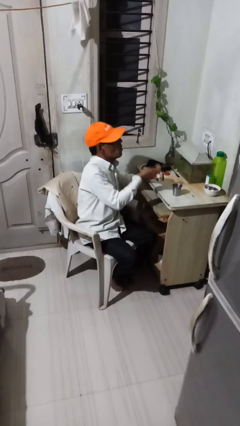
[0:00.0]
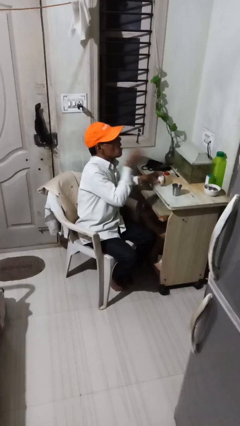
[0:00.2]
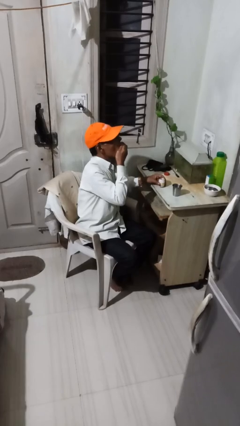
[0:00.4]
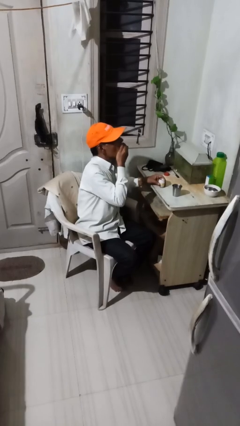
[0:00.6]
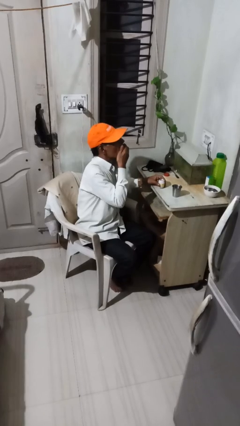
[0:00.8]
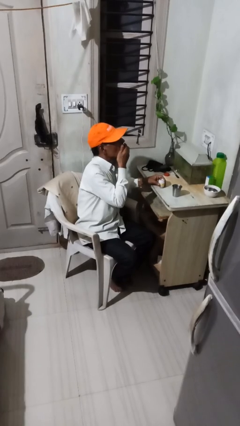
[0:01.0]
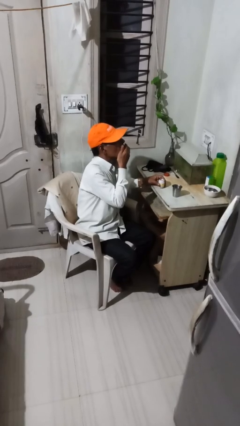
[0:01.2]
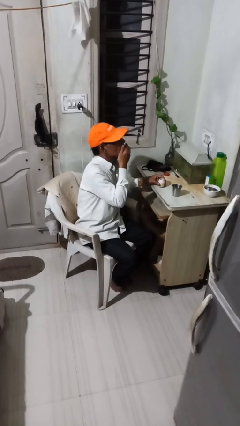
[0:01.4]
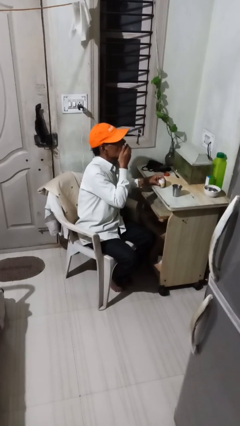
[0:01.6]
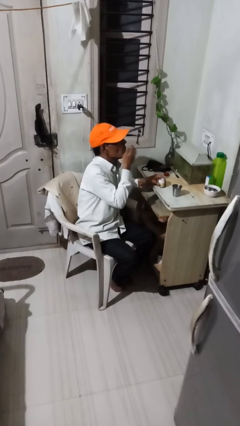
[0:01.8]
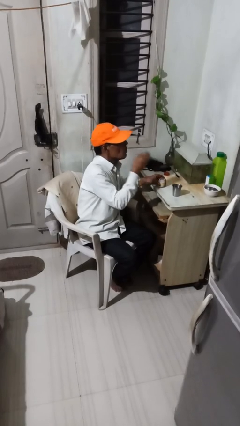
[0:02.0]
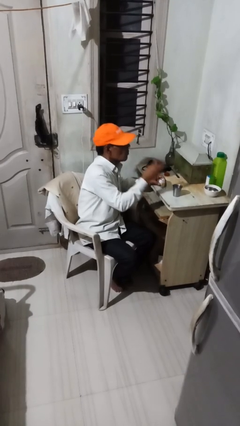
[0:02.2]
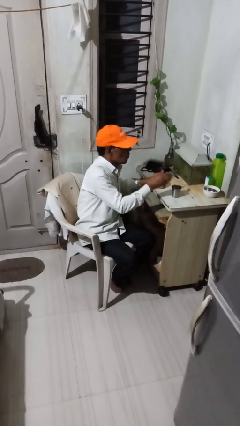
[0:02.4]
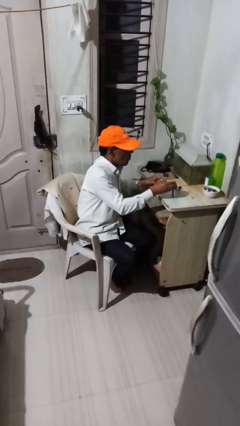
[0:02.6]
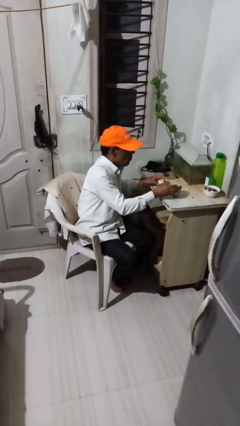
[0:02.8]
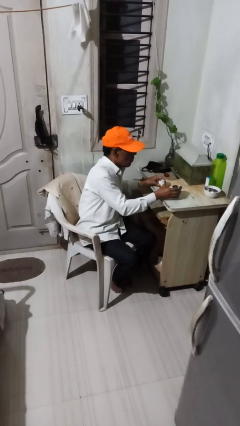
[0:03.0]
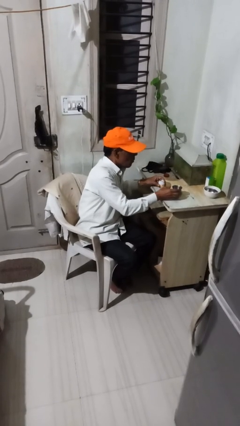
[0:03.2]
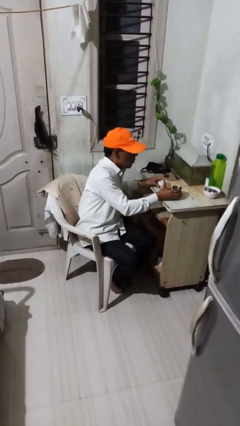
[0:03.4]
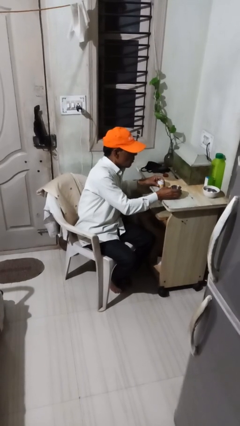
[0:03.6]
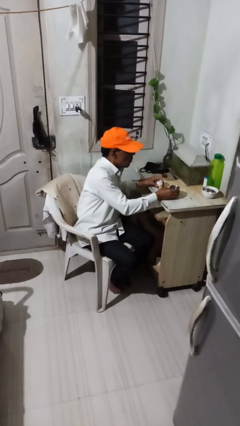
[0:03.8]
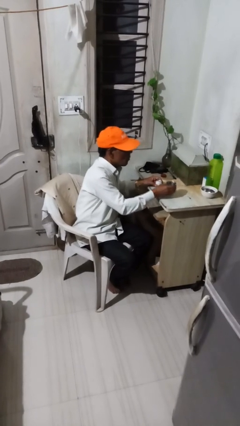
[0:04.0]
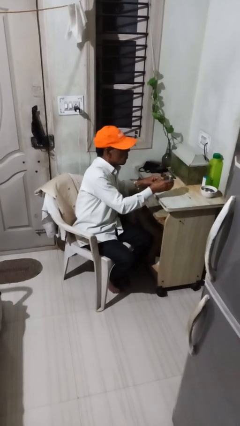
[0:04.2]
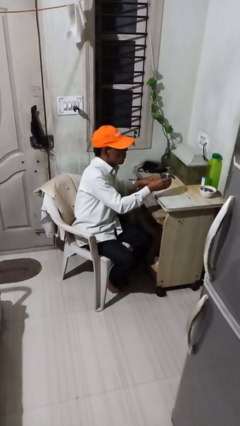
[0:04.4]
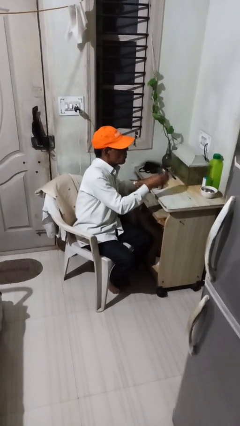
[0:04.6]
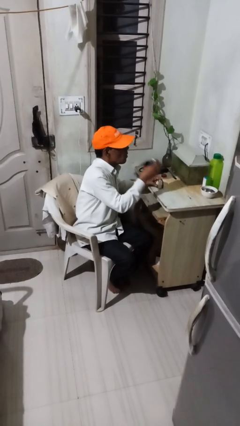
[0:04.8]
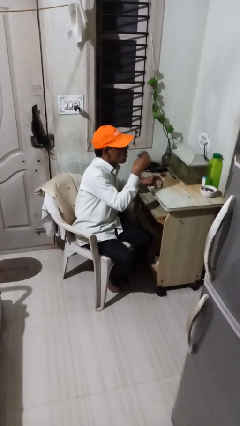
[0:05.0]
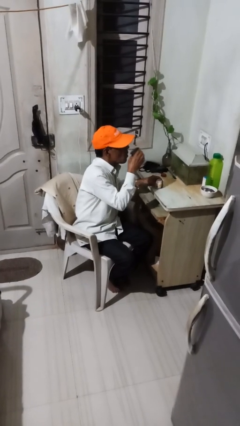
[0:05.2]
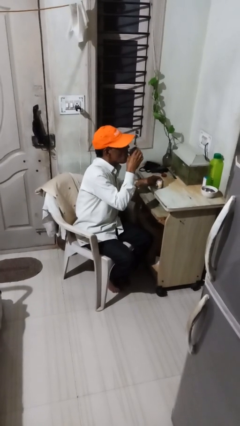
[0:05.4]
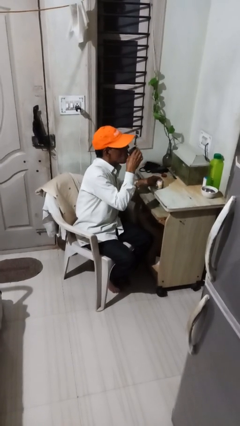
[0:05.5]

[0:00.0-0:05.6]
person folds socks

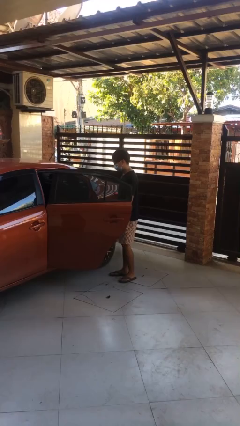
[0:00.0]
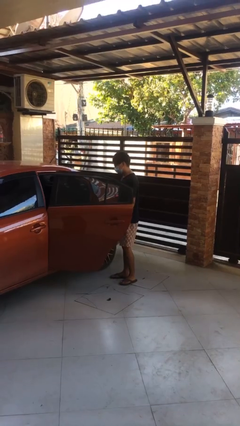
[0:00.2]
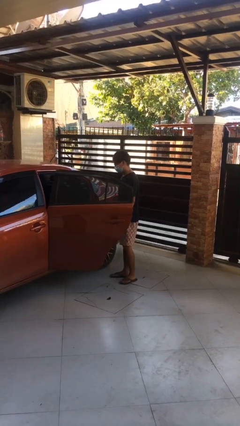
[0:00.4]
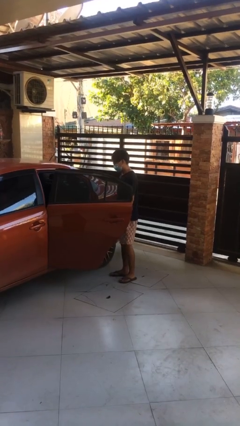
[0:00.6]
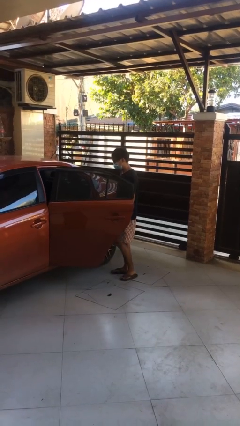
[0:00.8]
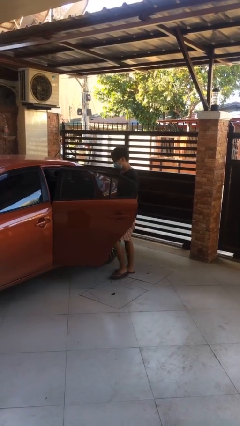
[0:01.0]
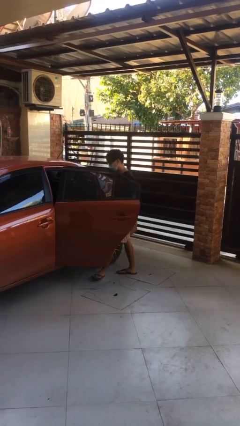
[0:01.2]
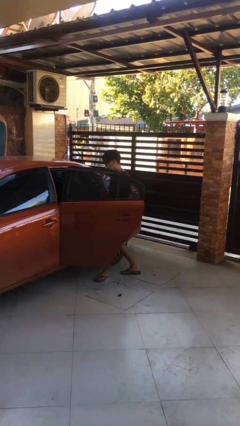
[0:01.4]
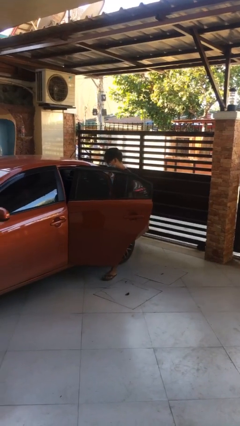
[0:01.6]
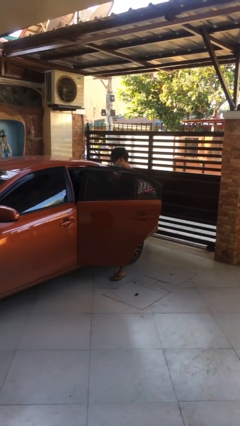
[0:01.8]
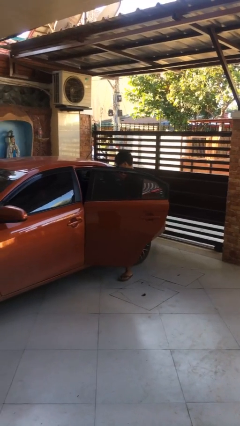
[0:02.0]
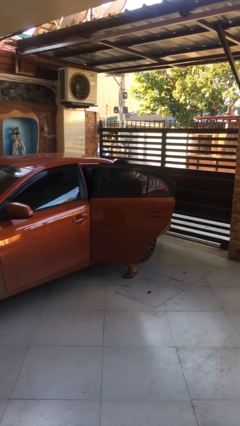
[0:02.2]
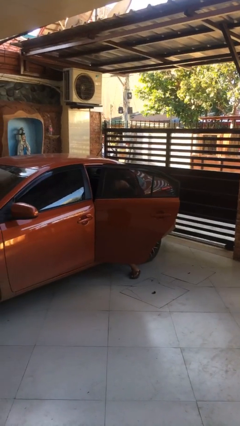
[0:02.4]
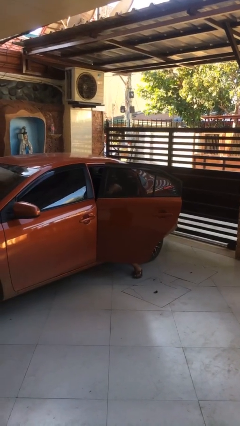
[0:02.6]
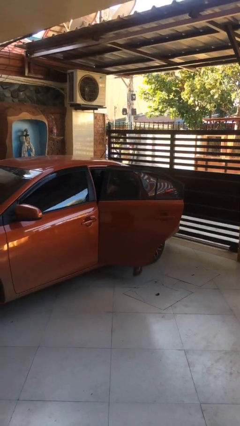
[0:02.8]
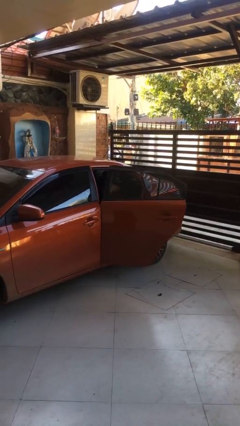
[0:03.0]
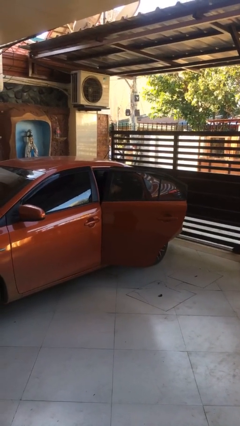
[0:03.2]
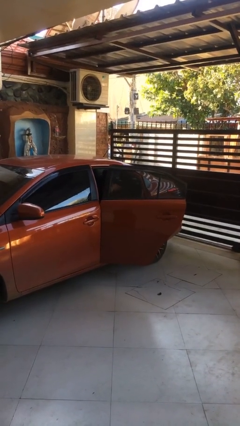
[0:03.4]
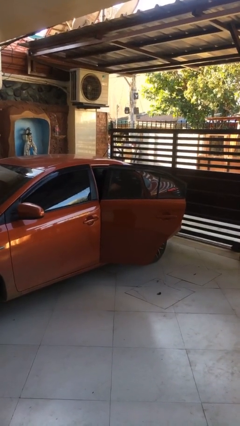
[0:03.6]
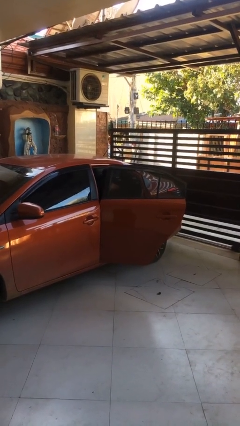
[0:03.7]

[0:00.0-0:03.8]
person enters car

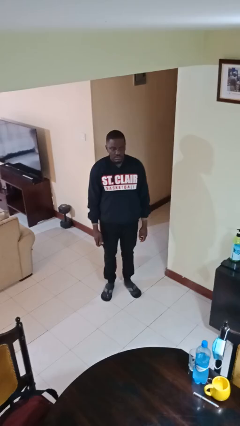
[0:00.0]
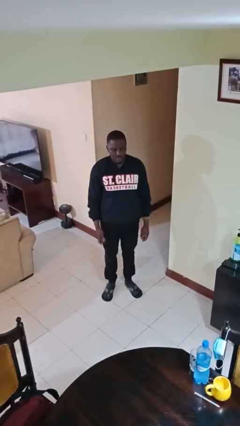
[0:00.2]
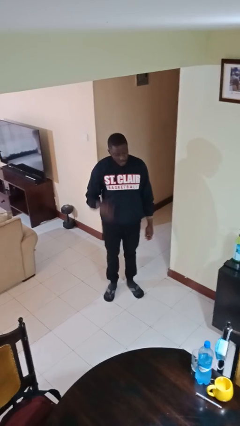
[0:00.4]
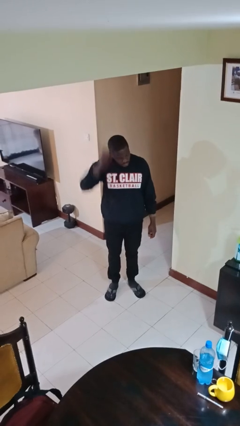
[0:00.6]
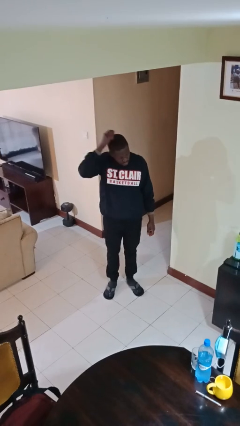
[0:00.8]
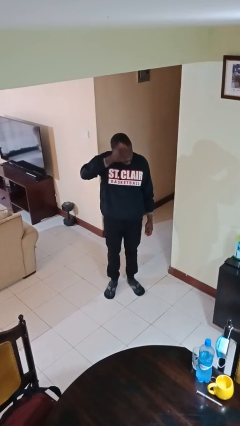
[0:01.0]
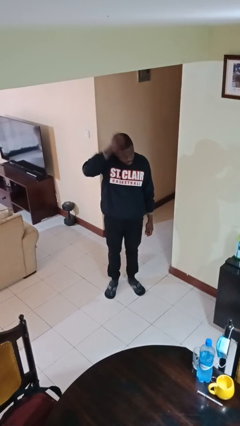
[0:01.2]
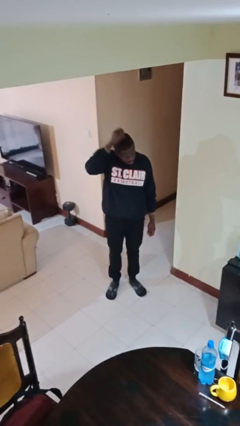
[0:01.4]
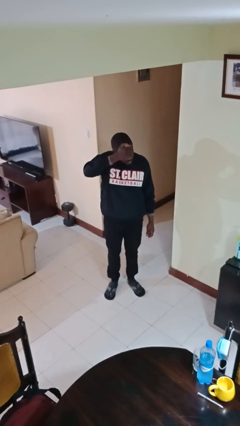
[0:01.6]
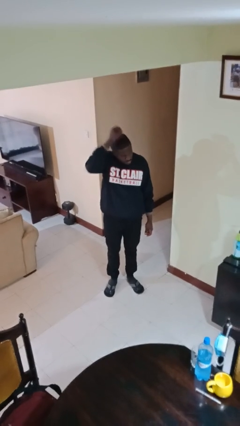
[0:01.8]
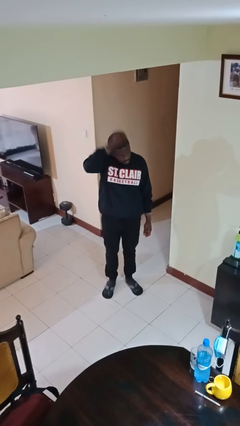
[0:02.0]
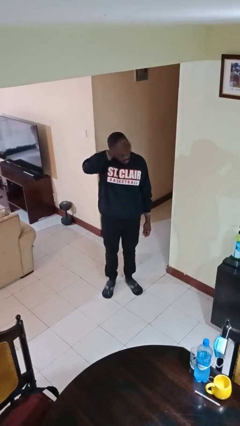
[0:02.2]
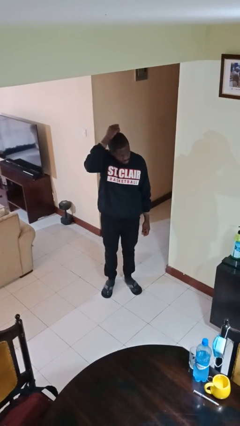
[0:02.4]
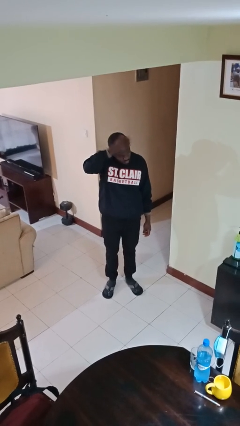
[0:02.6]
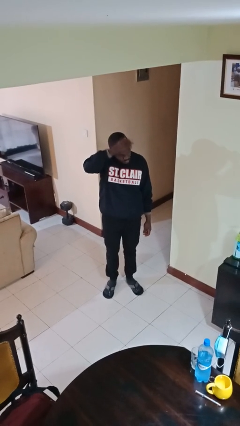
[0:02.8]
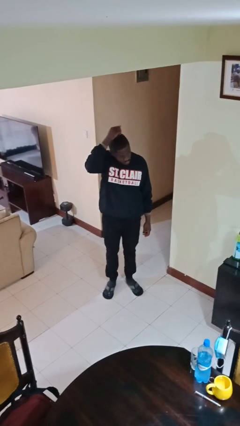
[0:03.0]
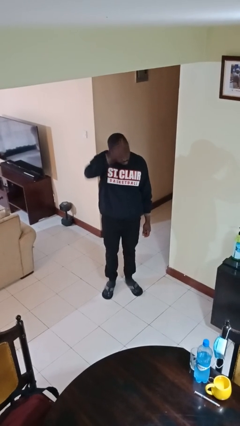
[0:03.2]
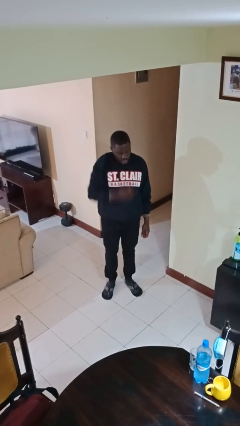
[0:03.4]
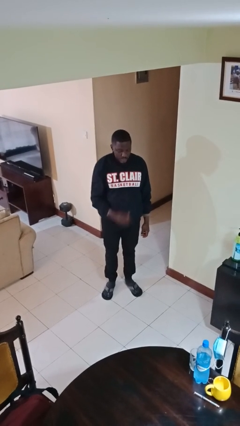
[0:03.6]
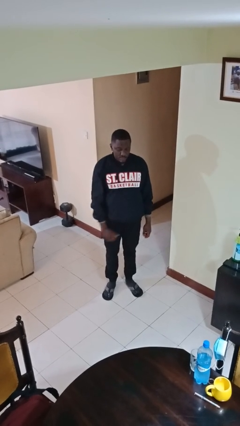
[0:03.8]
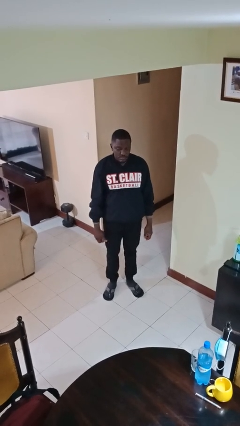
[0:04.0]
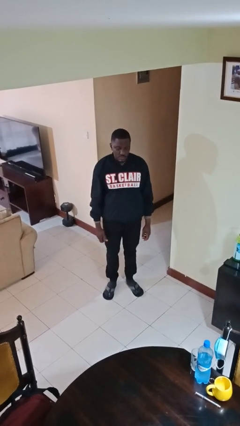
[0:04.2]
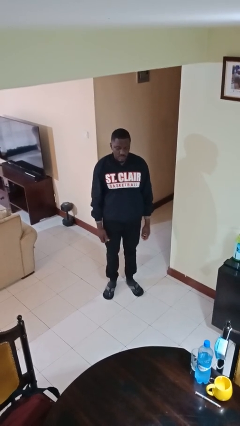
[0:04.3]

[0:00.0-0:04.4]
person brushes hair

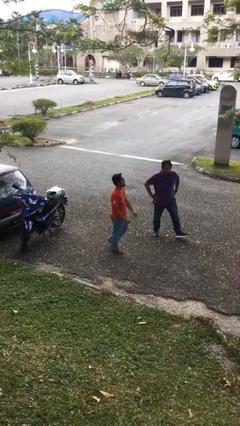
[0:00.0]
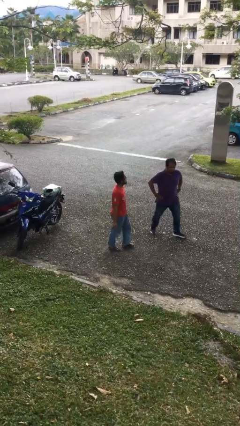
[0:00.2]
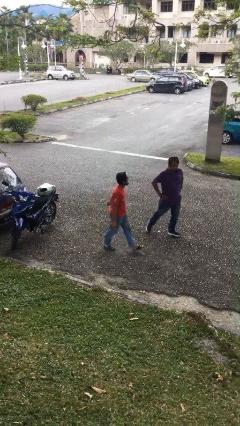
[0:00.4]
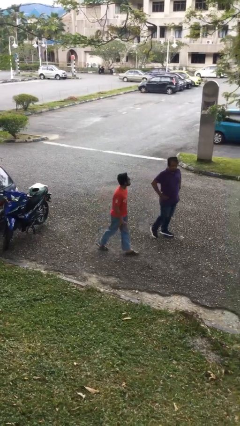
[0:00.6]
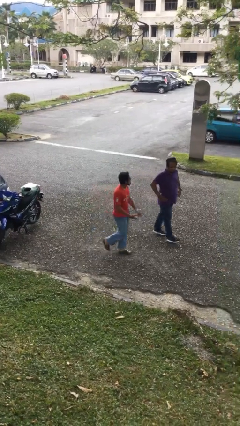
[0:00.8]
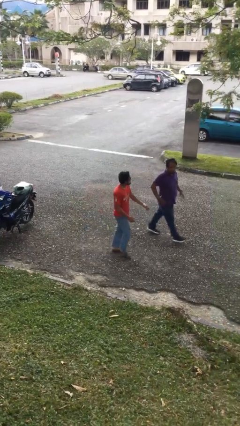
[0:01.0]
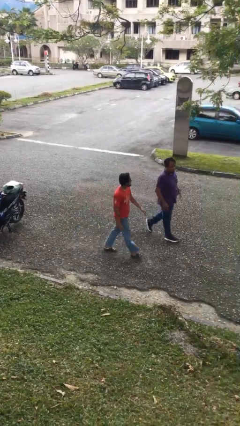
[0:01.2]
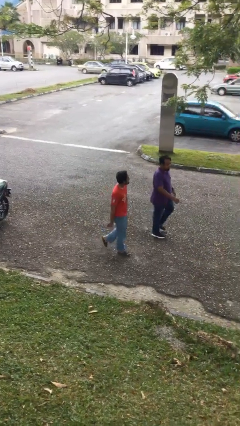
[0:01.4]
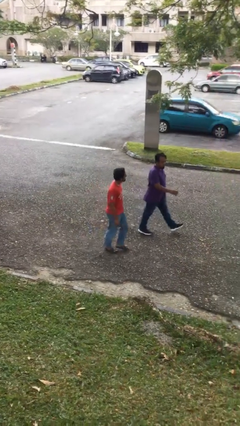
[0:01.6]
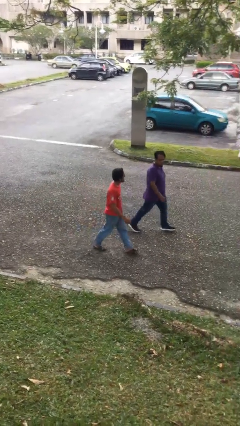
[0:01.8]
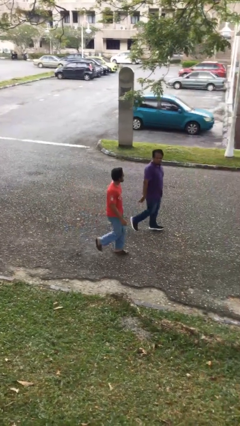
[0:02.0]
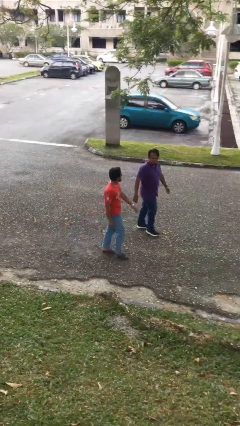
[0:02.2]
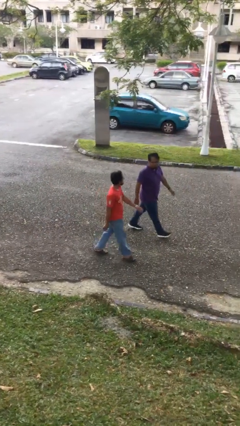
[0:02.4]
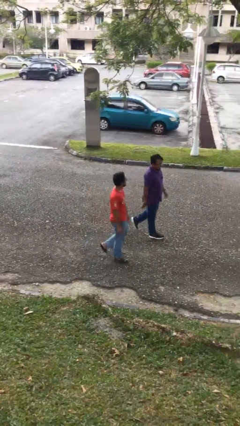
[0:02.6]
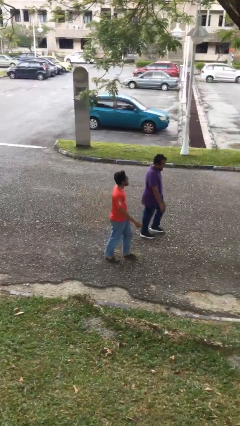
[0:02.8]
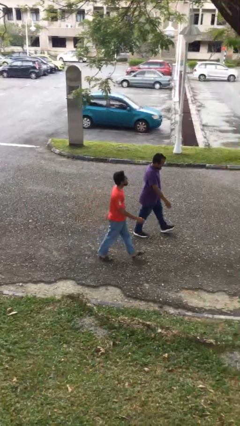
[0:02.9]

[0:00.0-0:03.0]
person talks to person

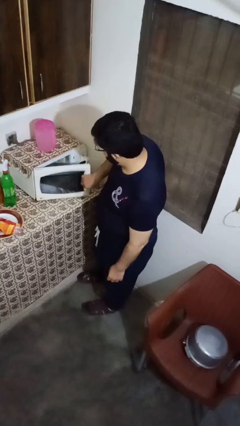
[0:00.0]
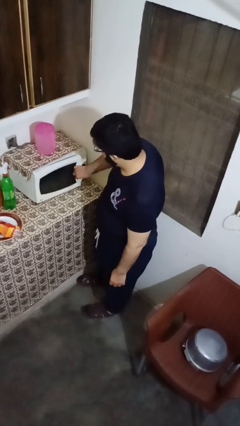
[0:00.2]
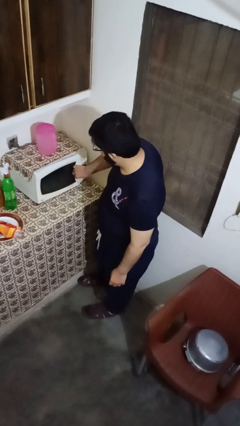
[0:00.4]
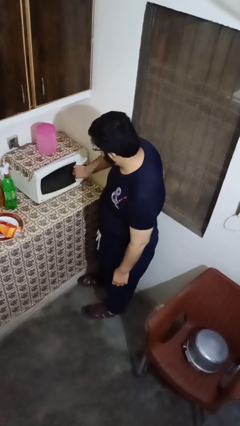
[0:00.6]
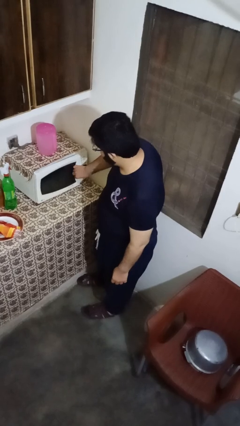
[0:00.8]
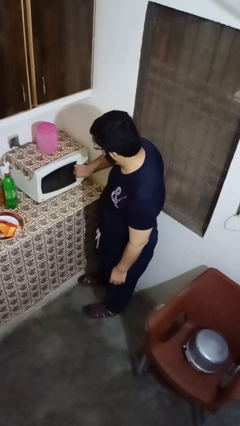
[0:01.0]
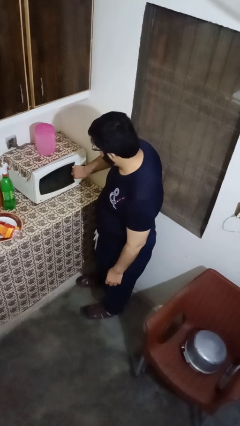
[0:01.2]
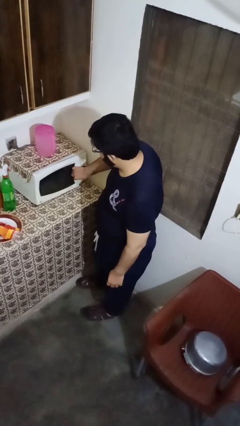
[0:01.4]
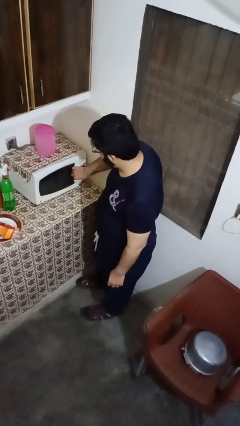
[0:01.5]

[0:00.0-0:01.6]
person closes oven door
